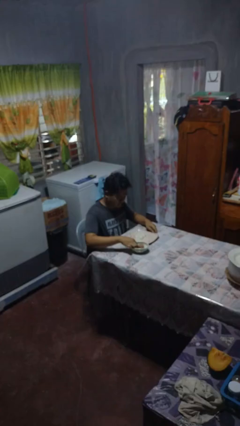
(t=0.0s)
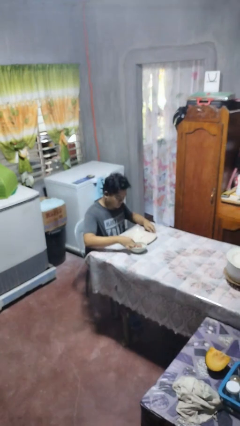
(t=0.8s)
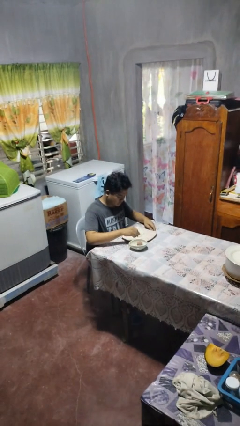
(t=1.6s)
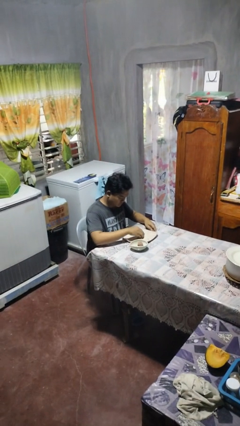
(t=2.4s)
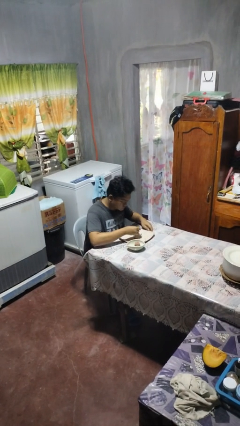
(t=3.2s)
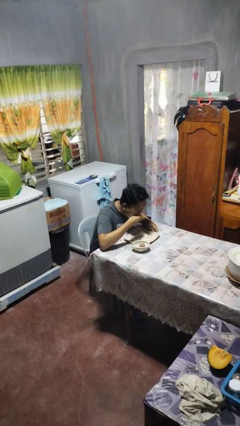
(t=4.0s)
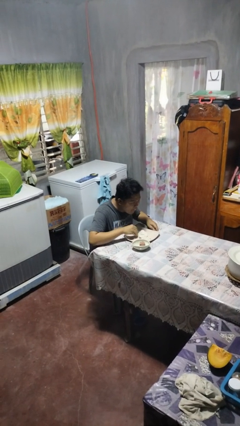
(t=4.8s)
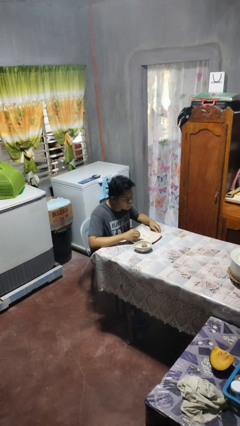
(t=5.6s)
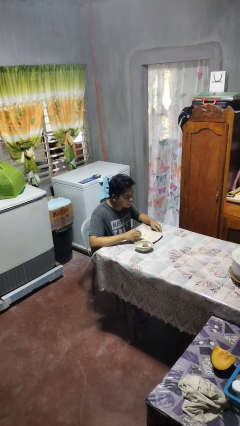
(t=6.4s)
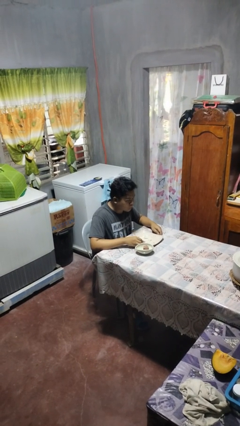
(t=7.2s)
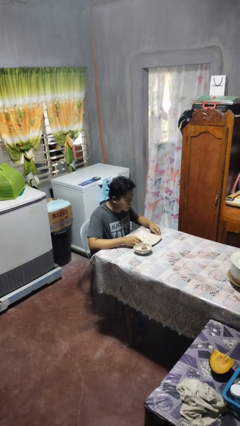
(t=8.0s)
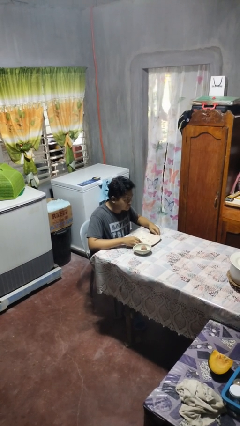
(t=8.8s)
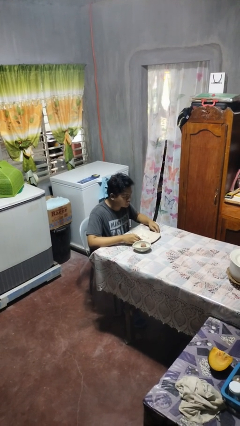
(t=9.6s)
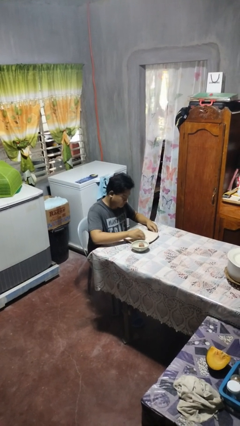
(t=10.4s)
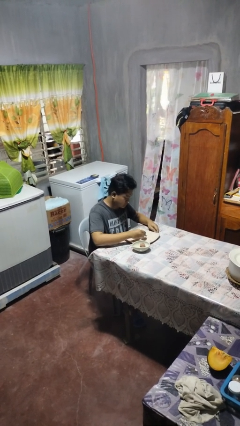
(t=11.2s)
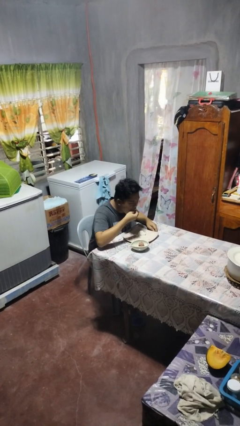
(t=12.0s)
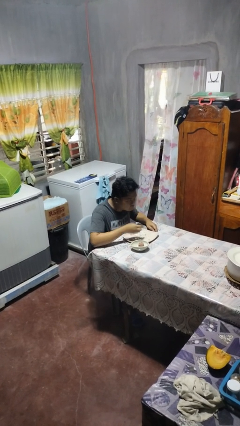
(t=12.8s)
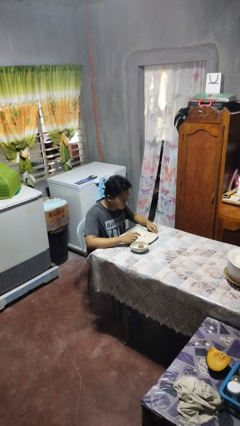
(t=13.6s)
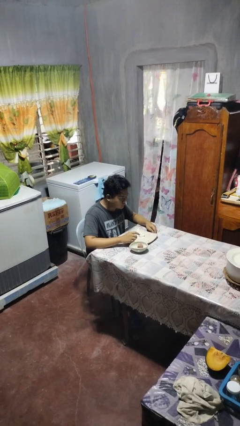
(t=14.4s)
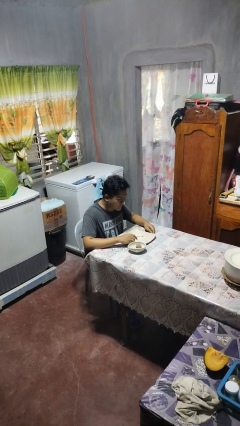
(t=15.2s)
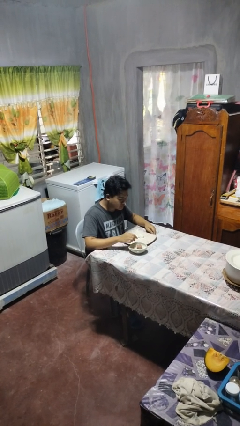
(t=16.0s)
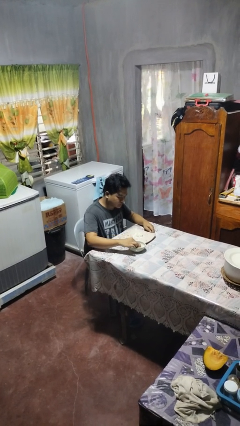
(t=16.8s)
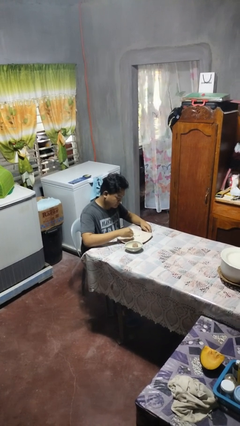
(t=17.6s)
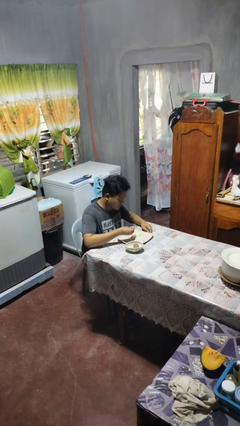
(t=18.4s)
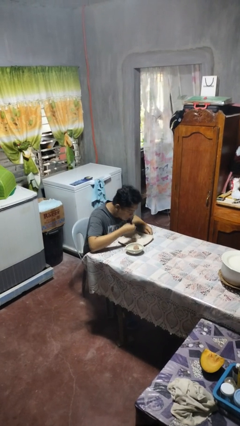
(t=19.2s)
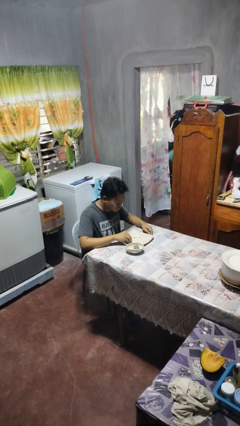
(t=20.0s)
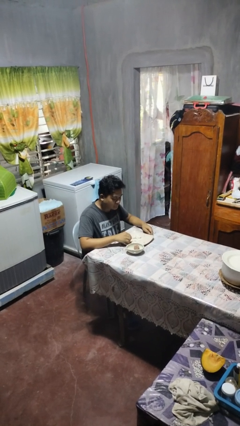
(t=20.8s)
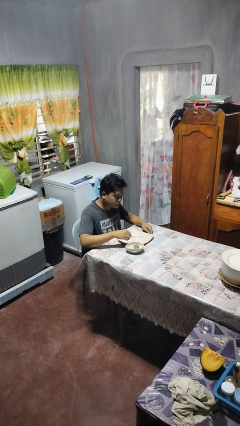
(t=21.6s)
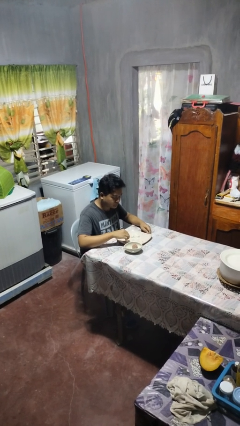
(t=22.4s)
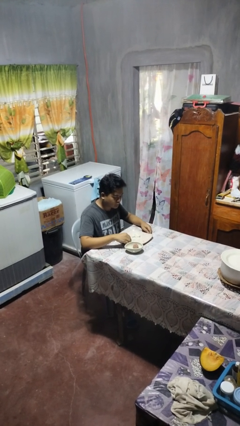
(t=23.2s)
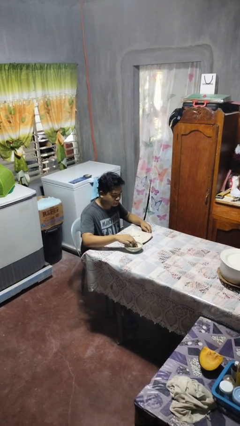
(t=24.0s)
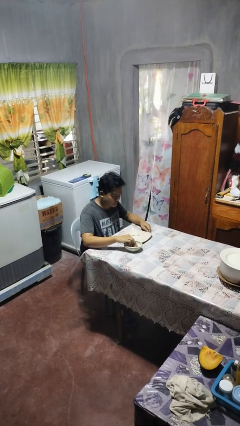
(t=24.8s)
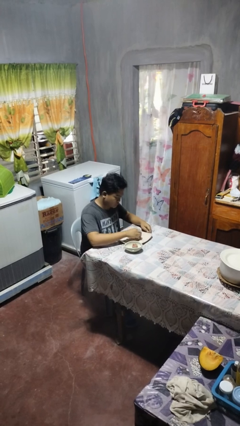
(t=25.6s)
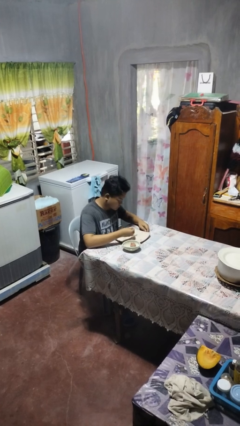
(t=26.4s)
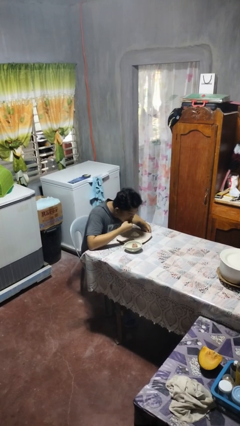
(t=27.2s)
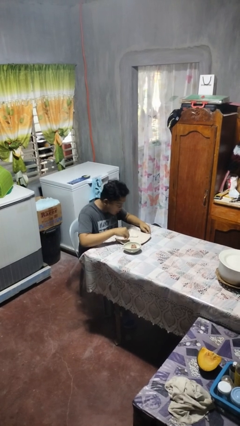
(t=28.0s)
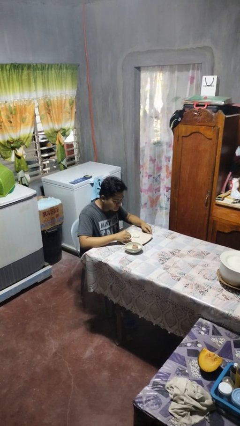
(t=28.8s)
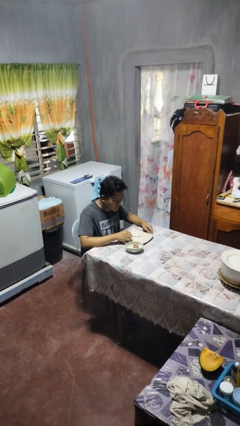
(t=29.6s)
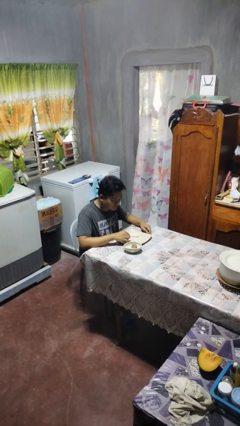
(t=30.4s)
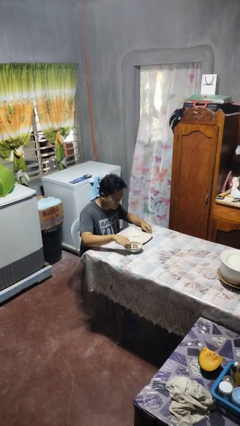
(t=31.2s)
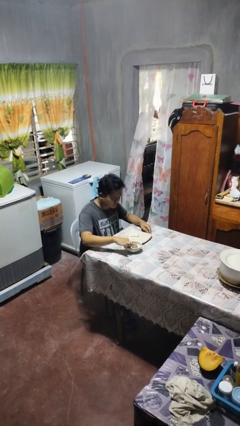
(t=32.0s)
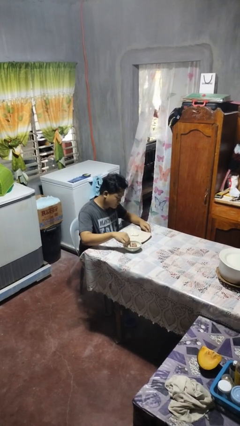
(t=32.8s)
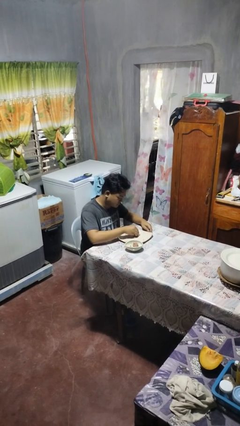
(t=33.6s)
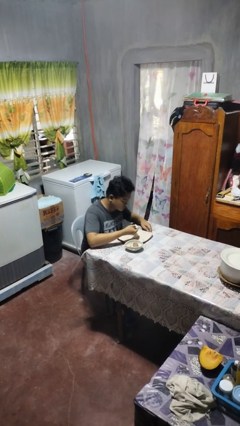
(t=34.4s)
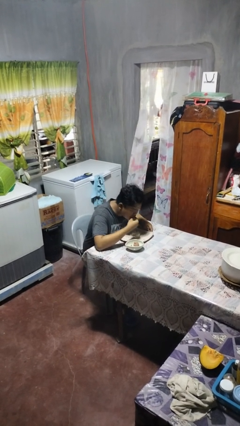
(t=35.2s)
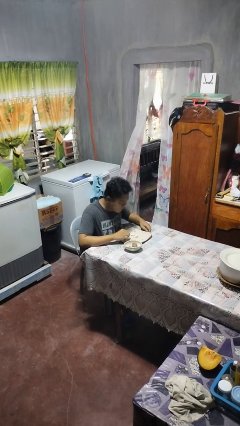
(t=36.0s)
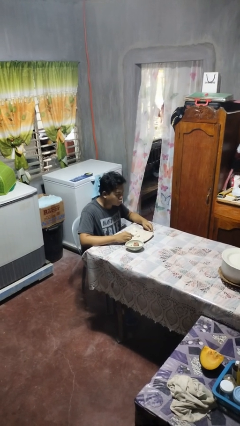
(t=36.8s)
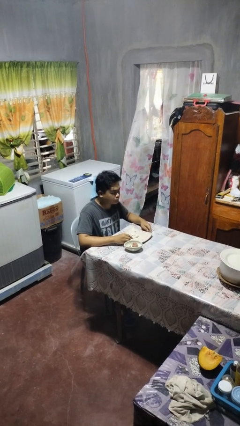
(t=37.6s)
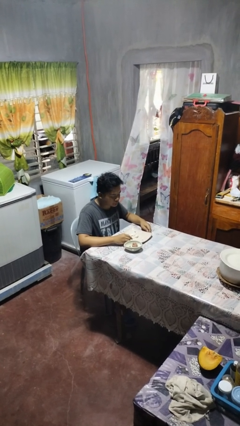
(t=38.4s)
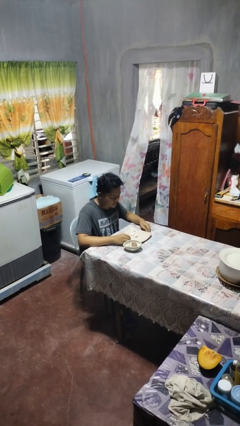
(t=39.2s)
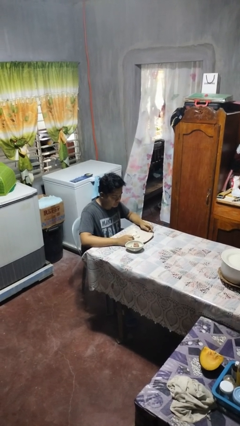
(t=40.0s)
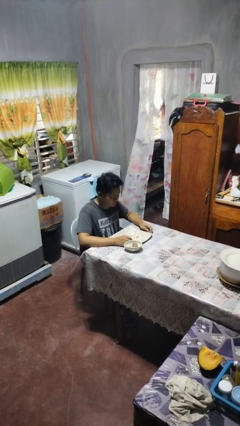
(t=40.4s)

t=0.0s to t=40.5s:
person eats with hands

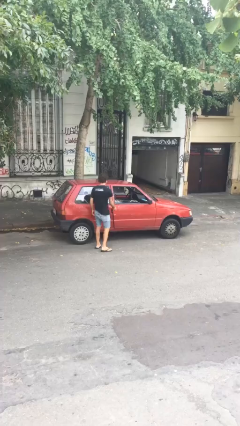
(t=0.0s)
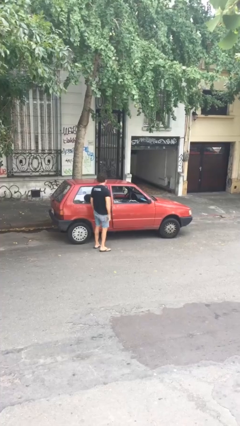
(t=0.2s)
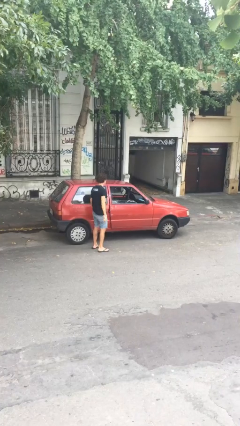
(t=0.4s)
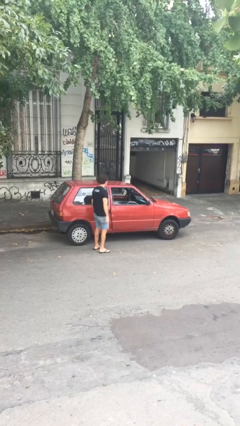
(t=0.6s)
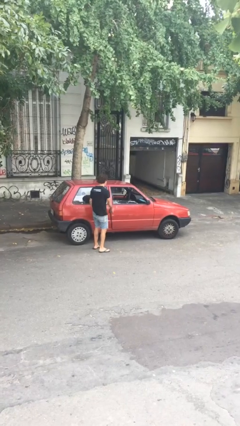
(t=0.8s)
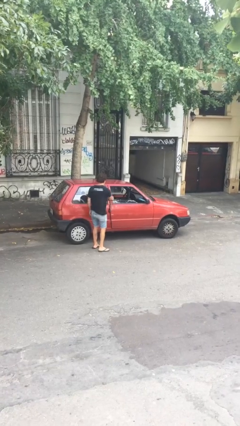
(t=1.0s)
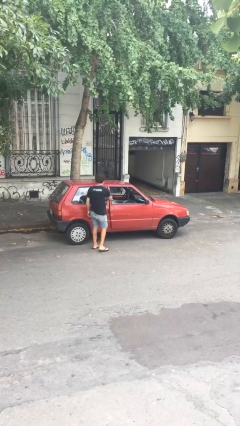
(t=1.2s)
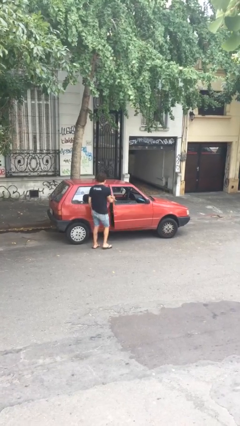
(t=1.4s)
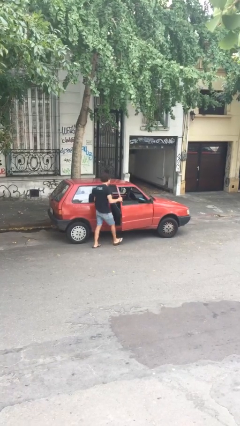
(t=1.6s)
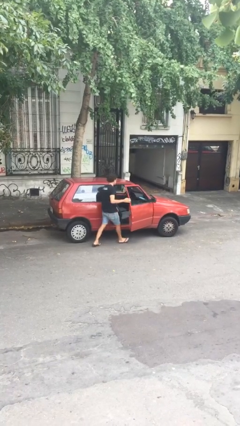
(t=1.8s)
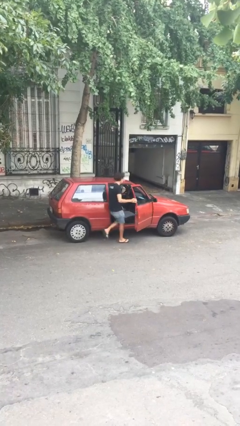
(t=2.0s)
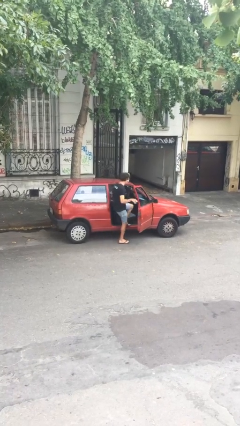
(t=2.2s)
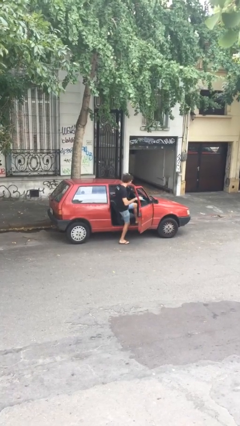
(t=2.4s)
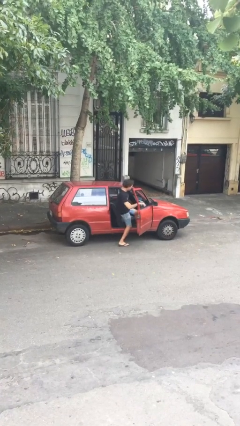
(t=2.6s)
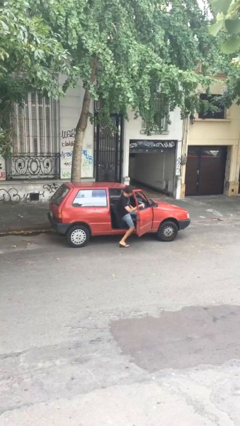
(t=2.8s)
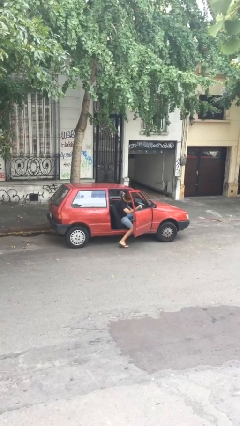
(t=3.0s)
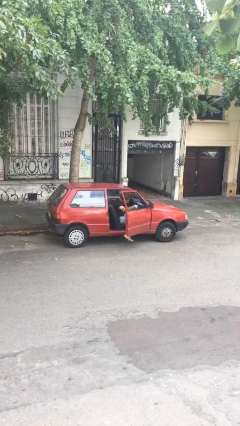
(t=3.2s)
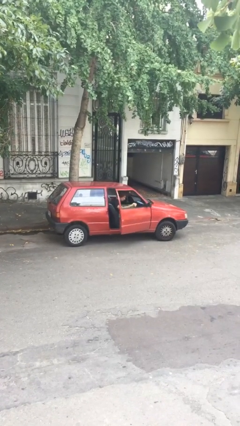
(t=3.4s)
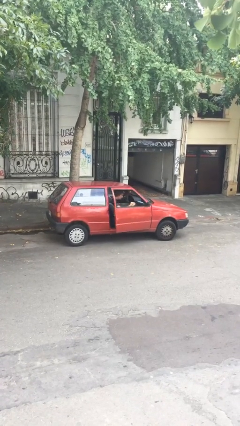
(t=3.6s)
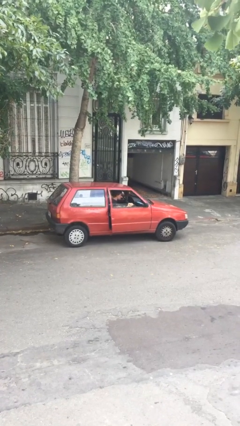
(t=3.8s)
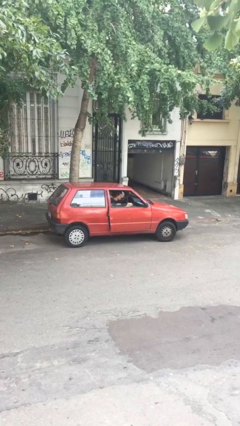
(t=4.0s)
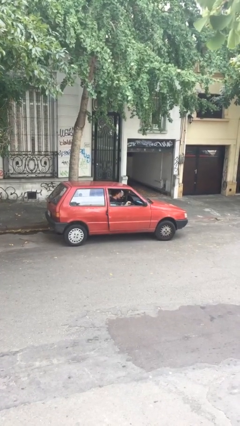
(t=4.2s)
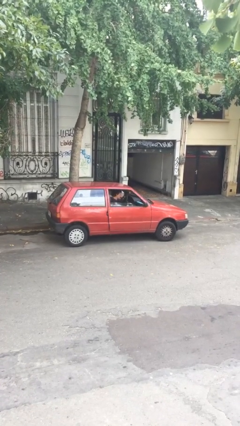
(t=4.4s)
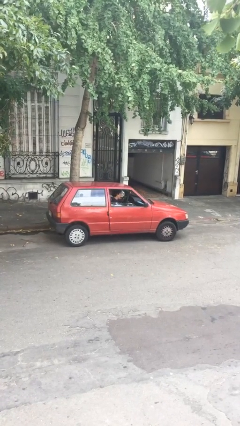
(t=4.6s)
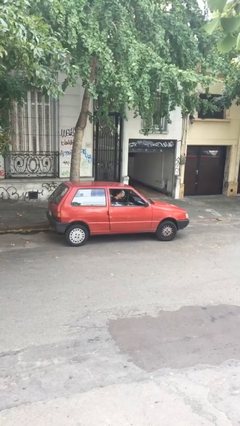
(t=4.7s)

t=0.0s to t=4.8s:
car picks up person

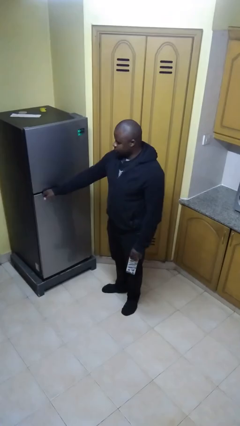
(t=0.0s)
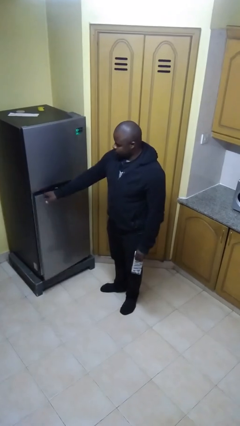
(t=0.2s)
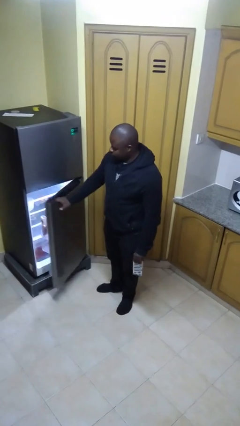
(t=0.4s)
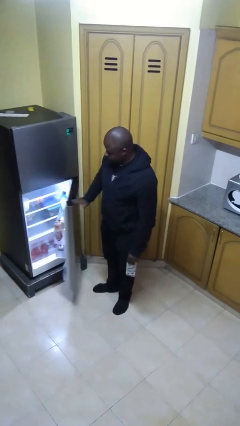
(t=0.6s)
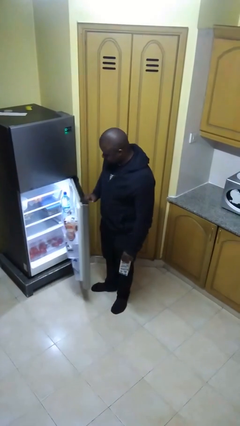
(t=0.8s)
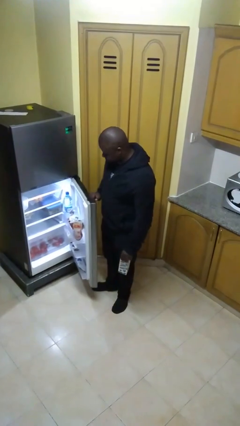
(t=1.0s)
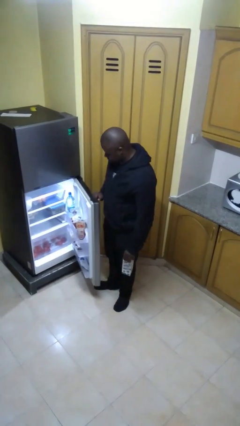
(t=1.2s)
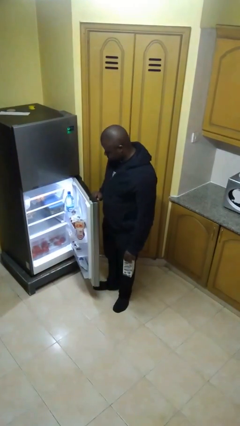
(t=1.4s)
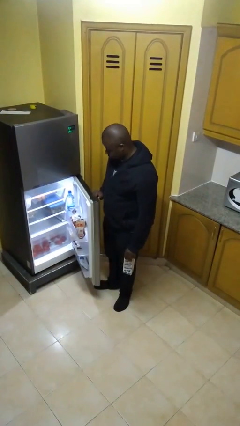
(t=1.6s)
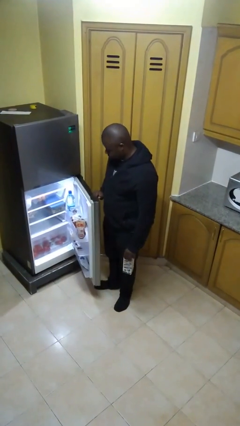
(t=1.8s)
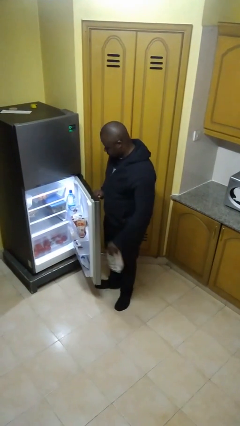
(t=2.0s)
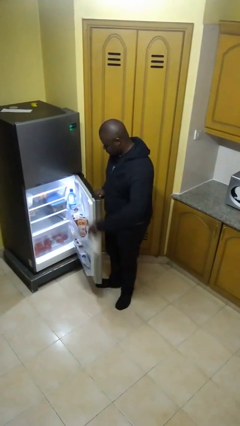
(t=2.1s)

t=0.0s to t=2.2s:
person opens refrigerator

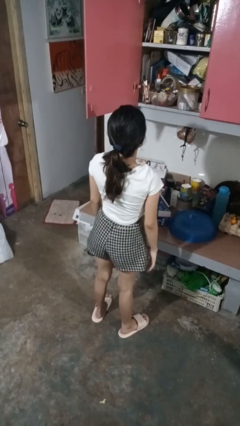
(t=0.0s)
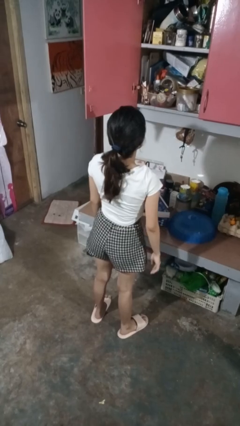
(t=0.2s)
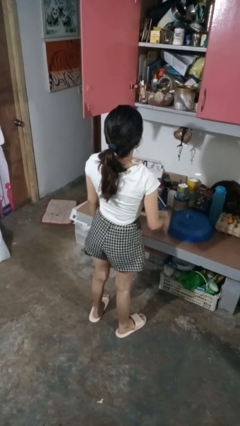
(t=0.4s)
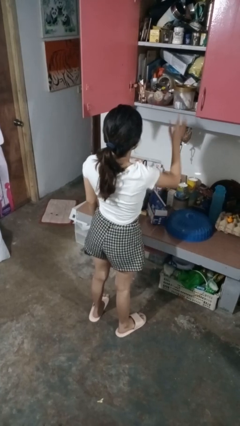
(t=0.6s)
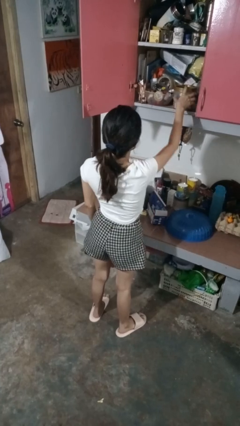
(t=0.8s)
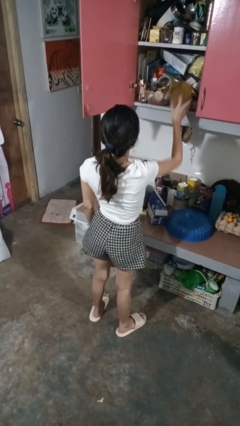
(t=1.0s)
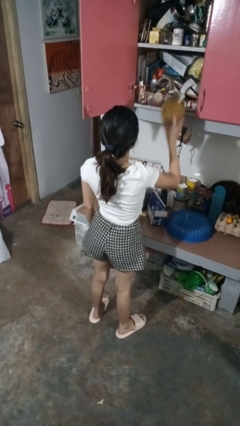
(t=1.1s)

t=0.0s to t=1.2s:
person picks up object from cabinet
